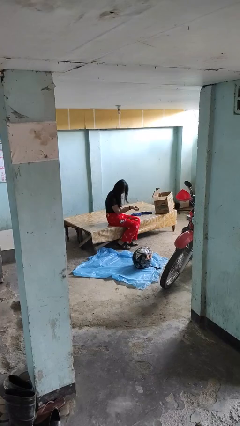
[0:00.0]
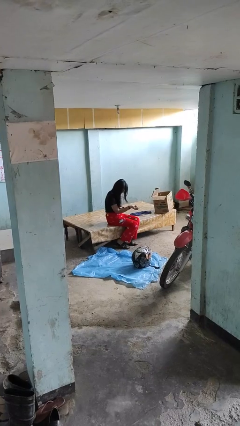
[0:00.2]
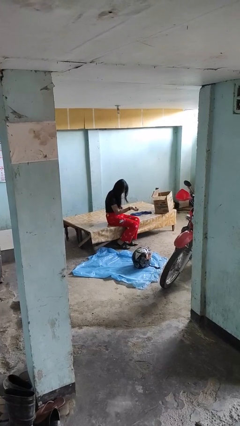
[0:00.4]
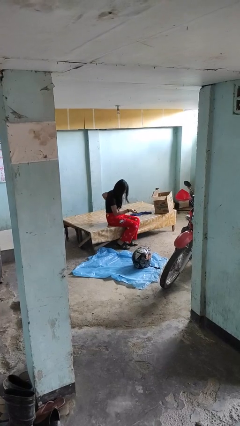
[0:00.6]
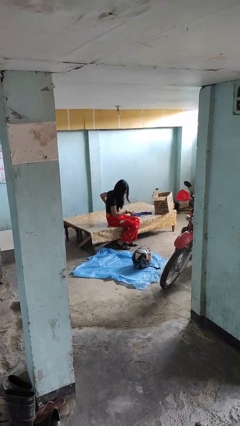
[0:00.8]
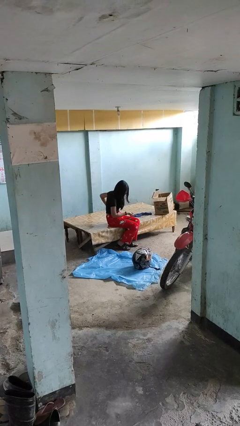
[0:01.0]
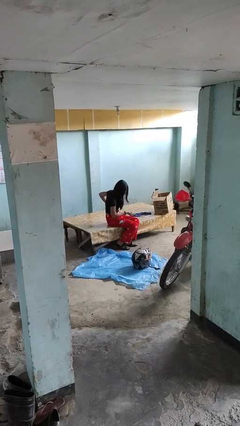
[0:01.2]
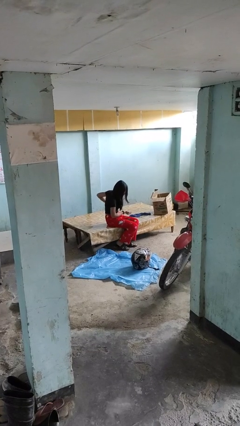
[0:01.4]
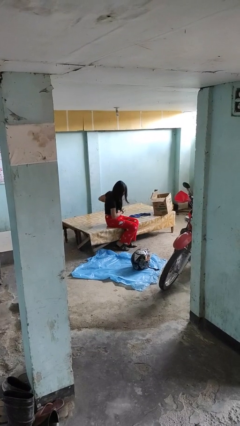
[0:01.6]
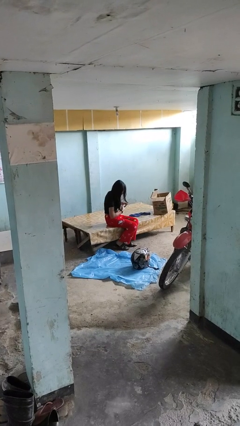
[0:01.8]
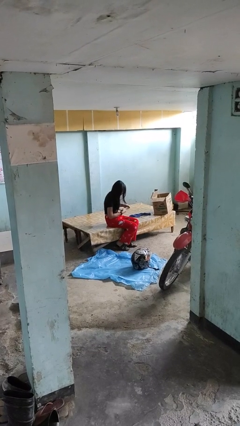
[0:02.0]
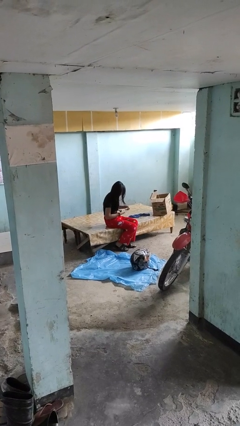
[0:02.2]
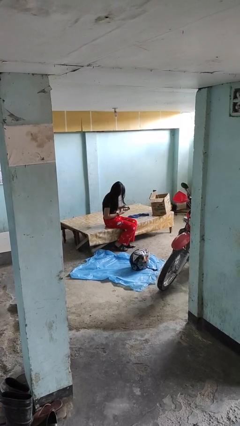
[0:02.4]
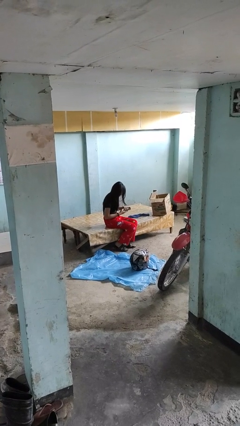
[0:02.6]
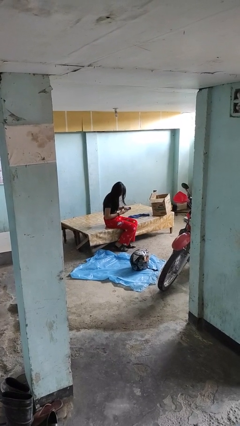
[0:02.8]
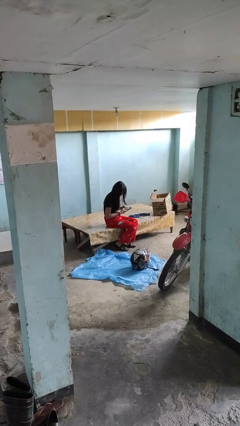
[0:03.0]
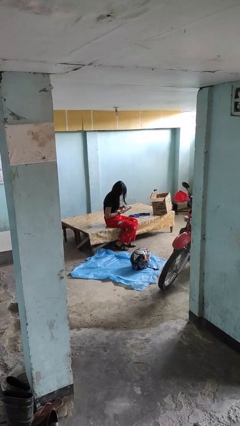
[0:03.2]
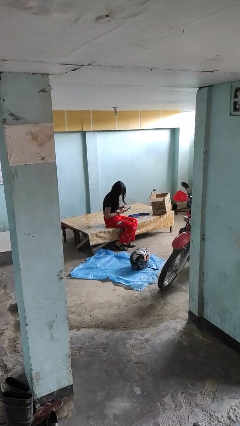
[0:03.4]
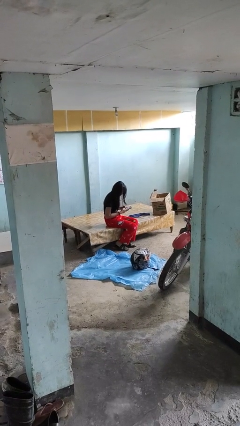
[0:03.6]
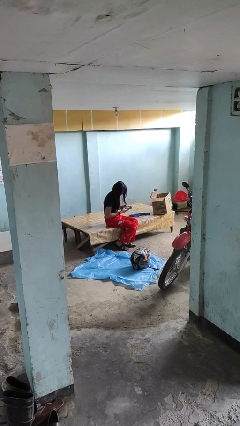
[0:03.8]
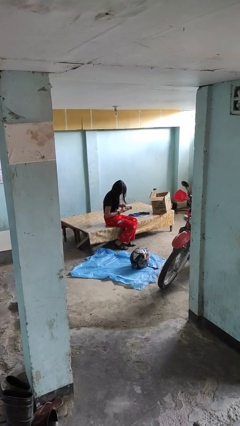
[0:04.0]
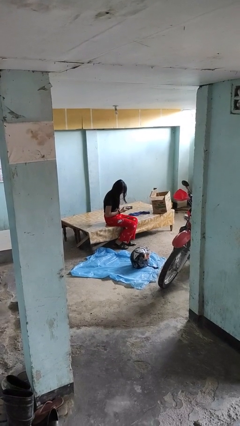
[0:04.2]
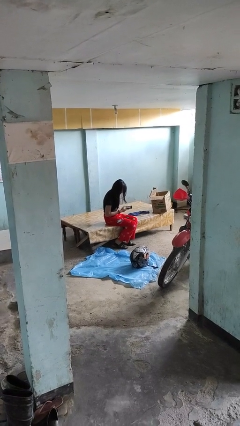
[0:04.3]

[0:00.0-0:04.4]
person takes phone from pocket

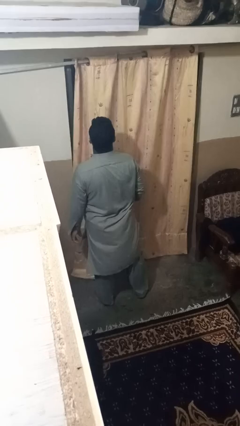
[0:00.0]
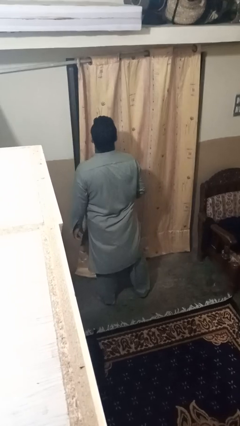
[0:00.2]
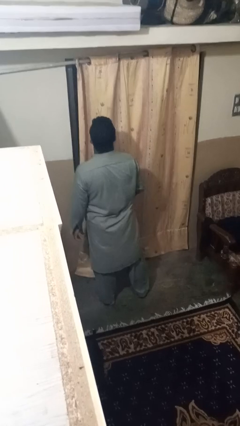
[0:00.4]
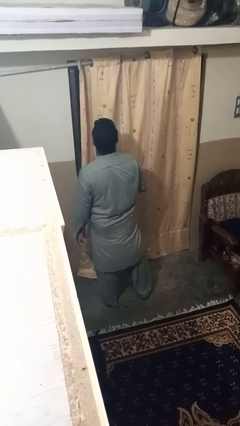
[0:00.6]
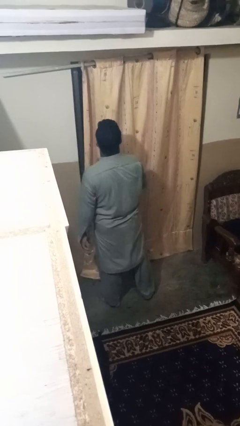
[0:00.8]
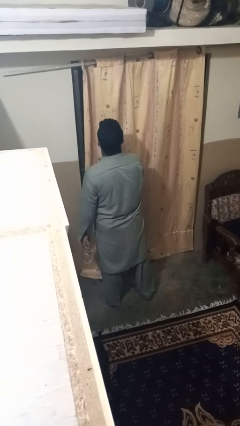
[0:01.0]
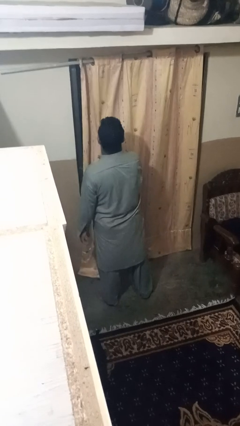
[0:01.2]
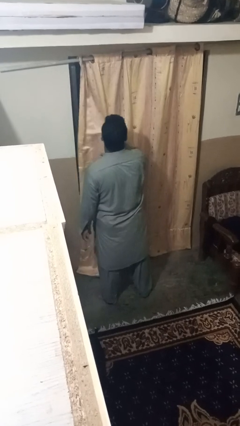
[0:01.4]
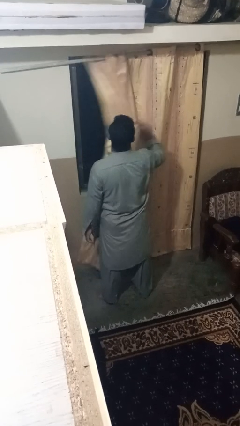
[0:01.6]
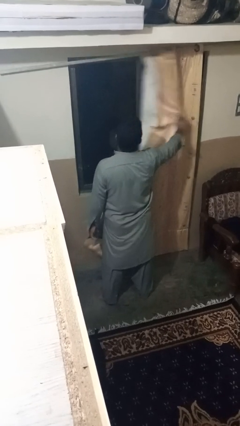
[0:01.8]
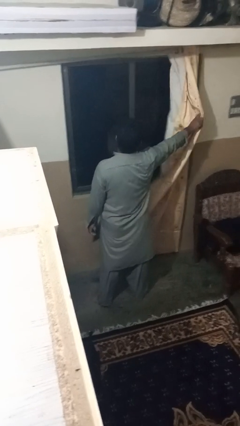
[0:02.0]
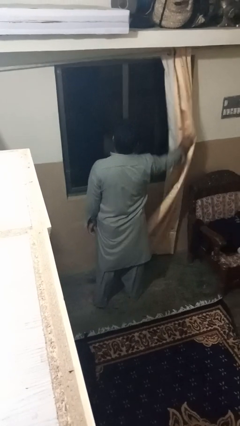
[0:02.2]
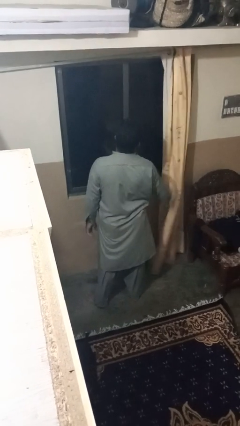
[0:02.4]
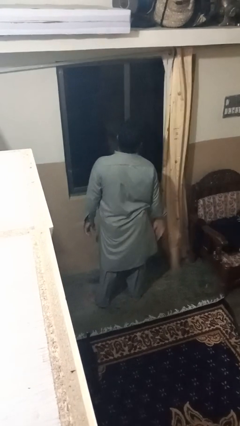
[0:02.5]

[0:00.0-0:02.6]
person opens curtains

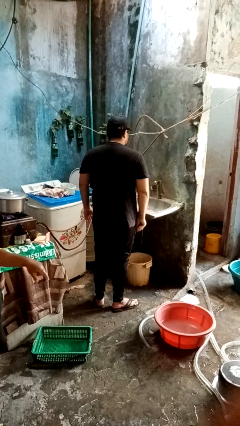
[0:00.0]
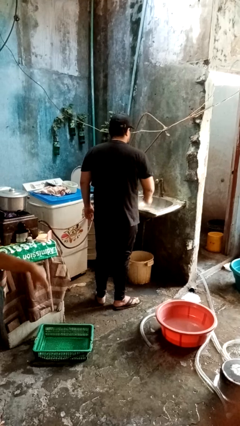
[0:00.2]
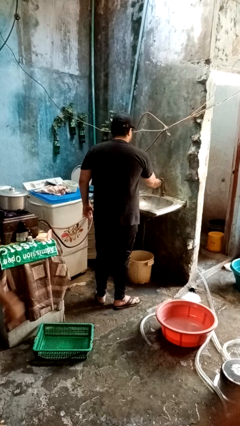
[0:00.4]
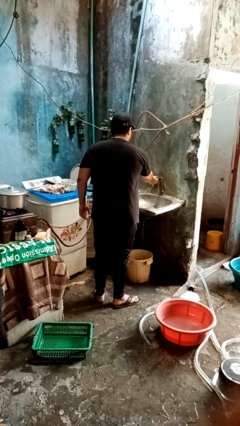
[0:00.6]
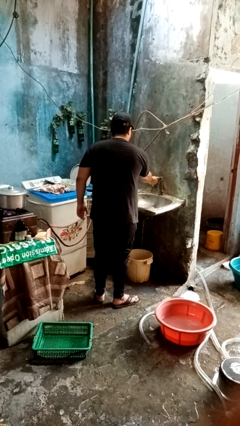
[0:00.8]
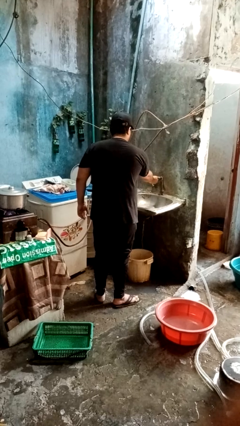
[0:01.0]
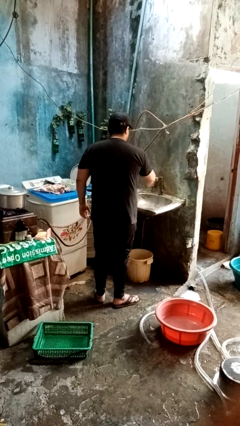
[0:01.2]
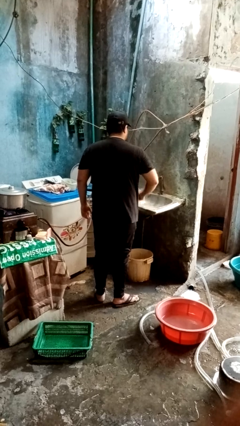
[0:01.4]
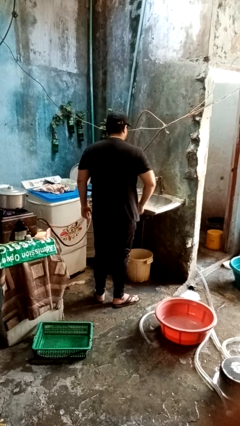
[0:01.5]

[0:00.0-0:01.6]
person turns off faucet

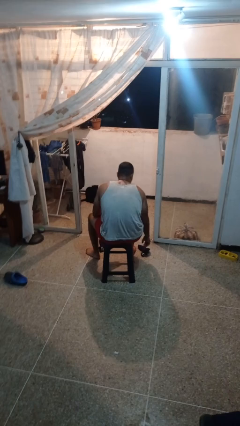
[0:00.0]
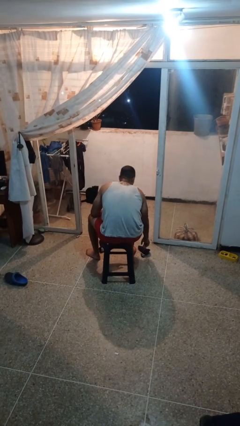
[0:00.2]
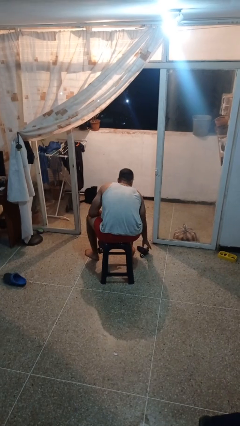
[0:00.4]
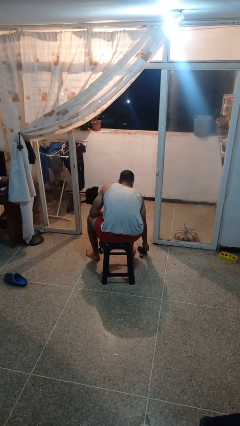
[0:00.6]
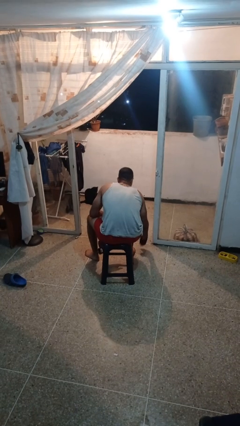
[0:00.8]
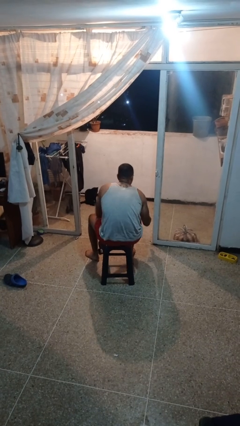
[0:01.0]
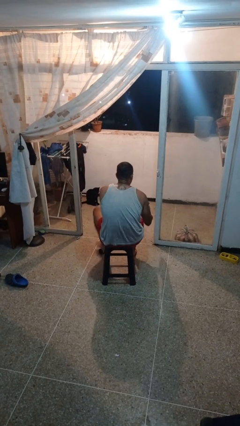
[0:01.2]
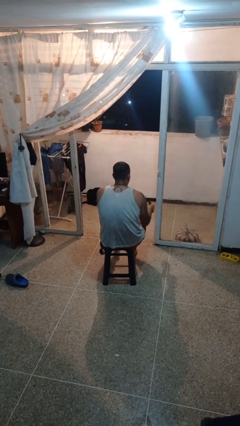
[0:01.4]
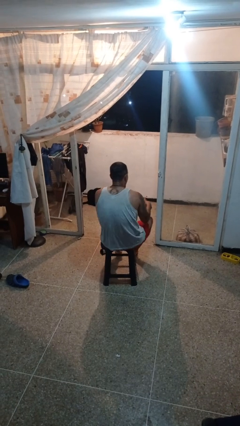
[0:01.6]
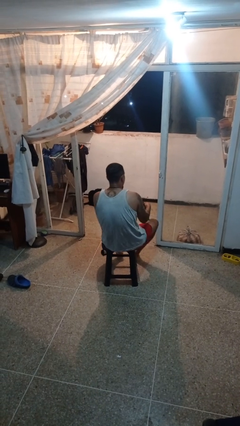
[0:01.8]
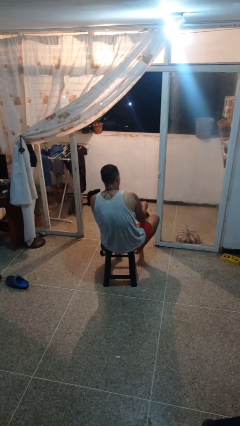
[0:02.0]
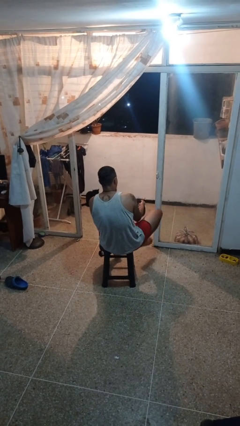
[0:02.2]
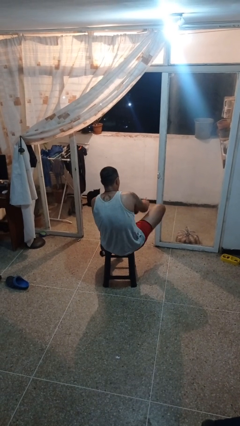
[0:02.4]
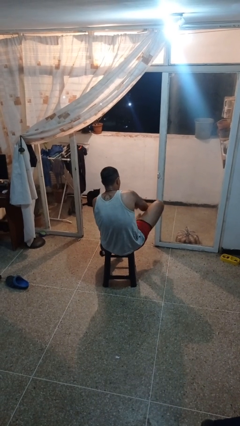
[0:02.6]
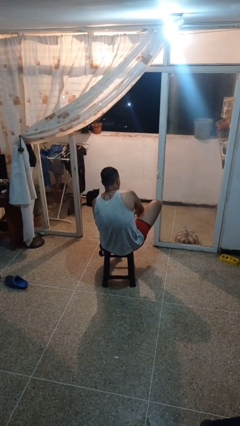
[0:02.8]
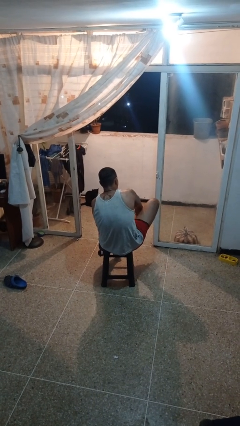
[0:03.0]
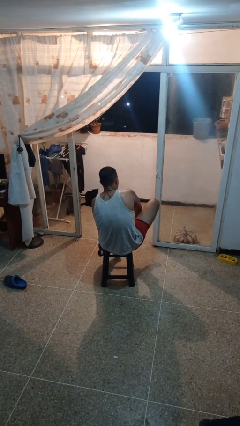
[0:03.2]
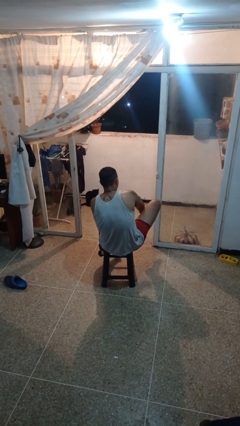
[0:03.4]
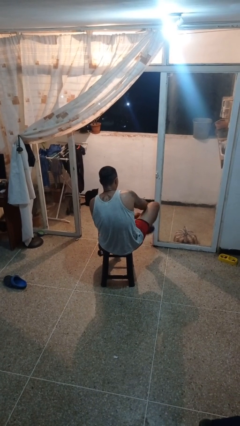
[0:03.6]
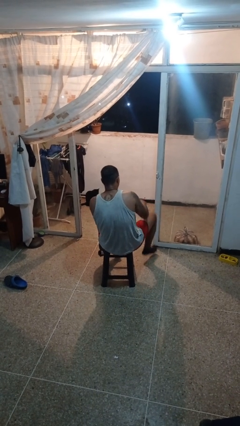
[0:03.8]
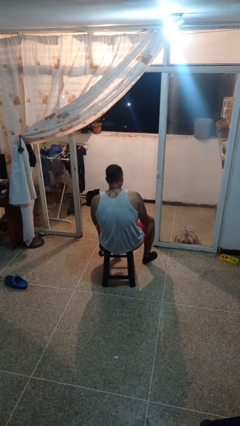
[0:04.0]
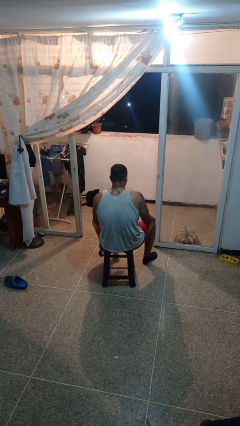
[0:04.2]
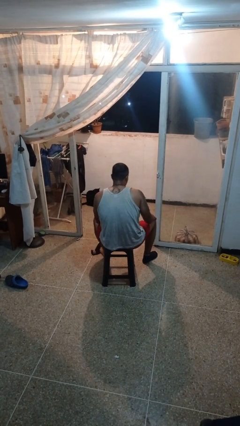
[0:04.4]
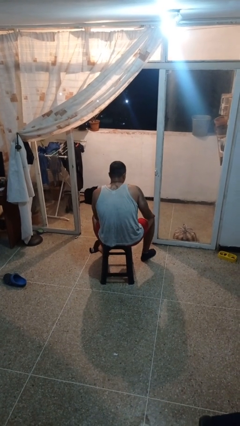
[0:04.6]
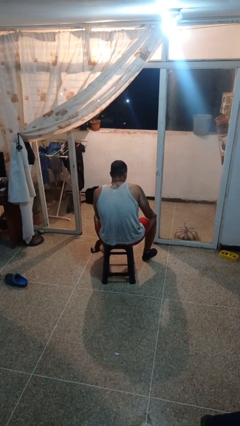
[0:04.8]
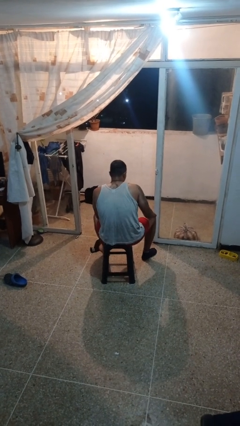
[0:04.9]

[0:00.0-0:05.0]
person puts on socks

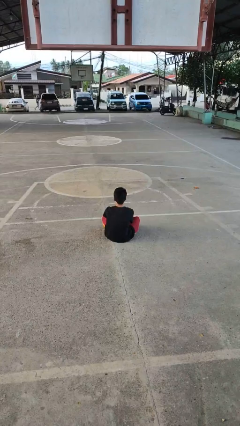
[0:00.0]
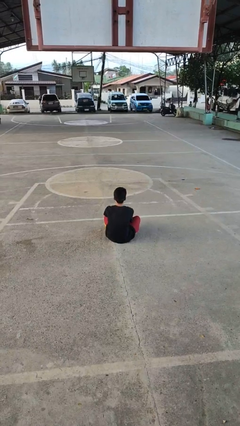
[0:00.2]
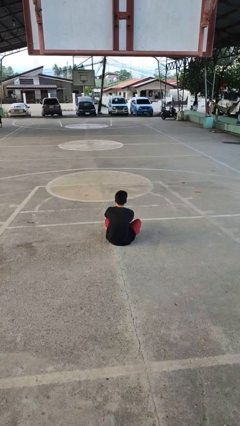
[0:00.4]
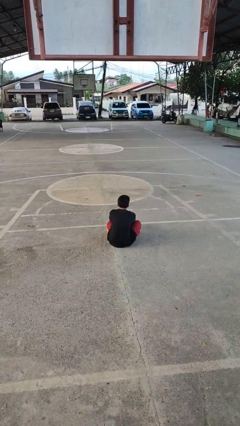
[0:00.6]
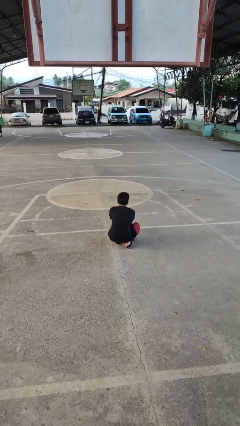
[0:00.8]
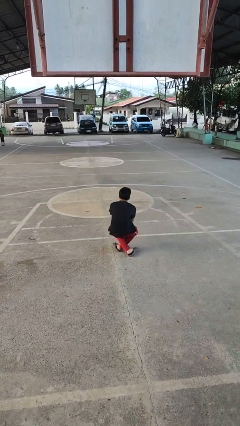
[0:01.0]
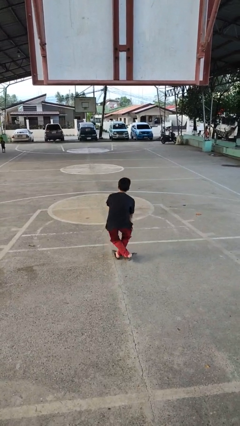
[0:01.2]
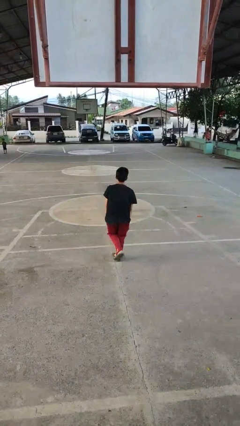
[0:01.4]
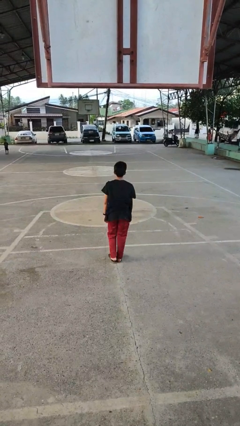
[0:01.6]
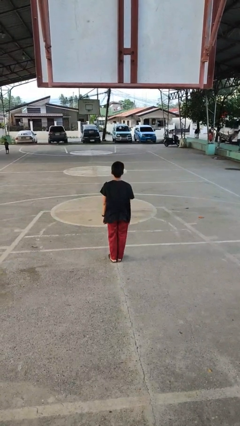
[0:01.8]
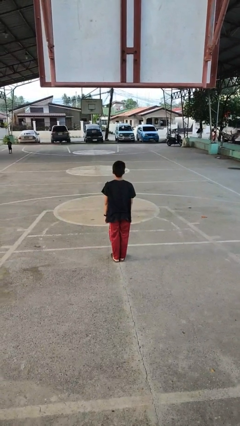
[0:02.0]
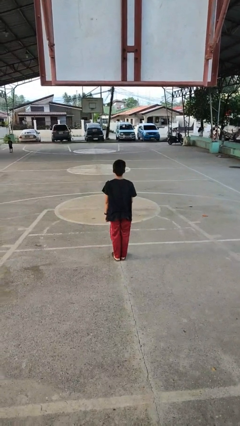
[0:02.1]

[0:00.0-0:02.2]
person stands up from floor

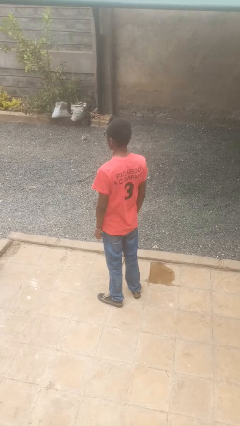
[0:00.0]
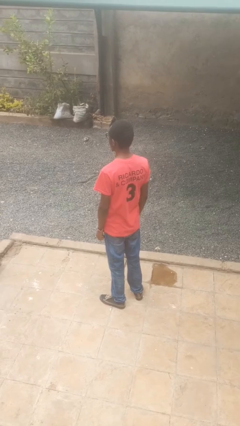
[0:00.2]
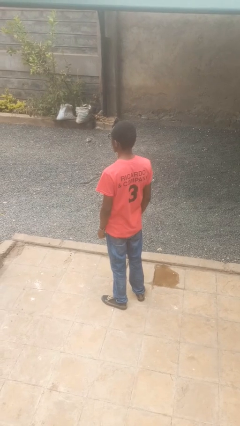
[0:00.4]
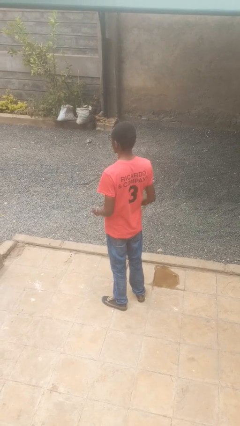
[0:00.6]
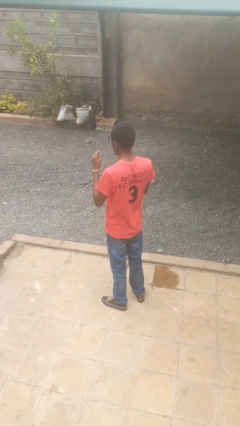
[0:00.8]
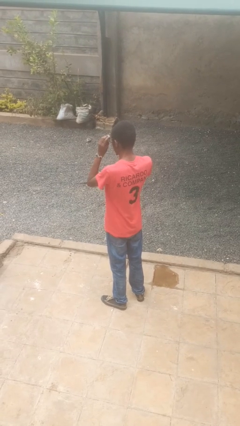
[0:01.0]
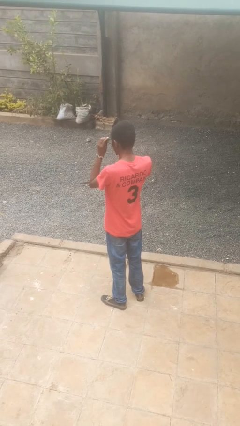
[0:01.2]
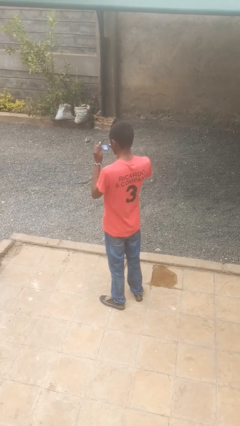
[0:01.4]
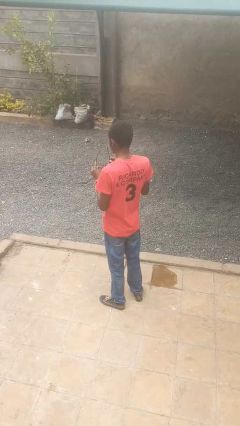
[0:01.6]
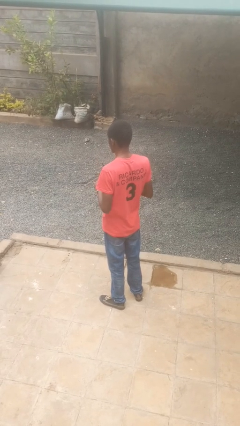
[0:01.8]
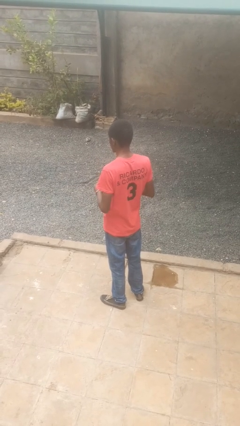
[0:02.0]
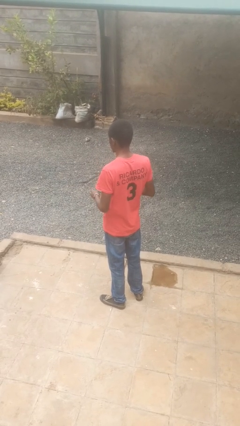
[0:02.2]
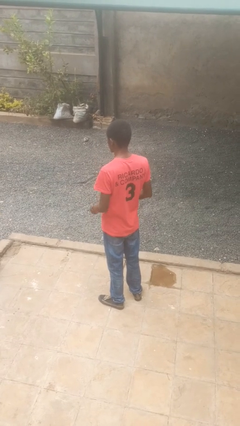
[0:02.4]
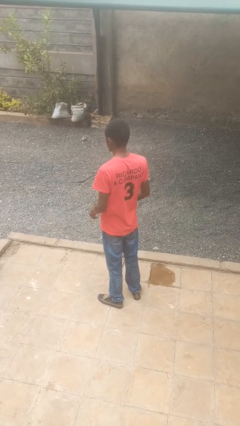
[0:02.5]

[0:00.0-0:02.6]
person takes off glasses
